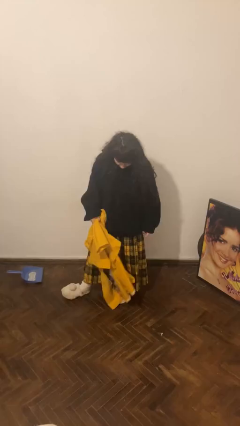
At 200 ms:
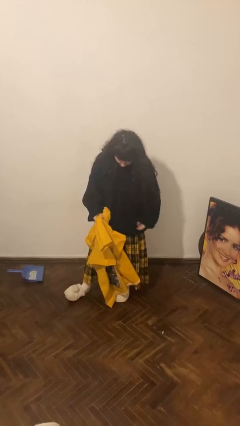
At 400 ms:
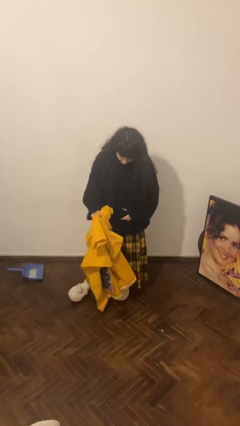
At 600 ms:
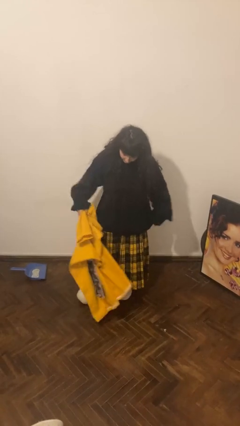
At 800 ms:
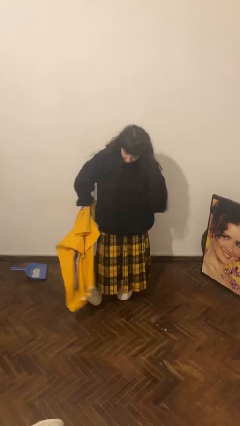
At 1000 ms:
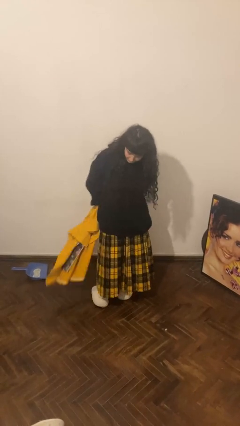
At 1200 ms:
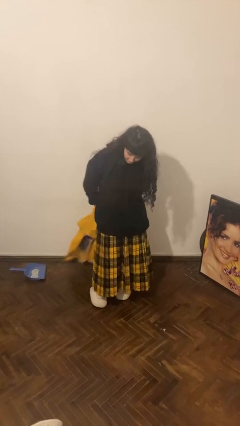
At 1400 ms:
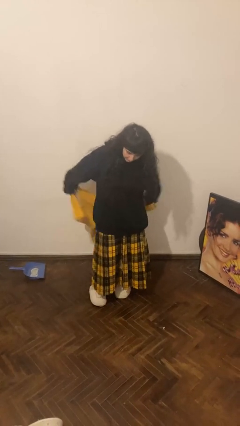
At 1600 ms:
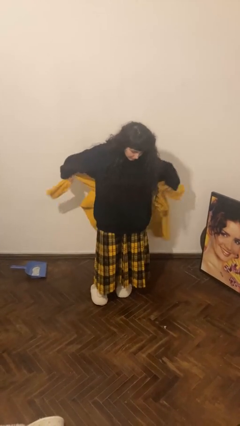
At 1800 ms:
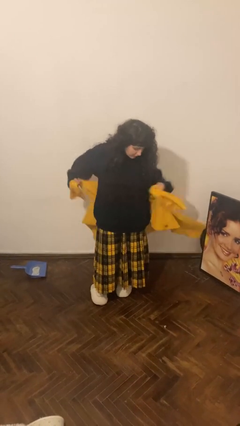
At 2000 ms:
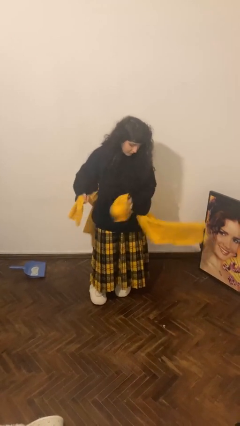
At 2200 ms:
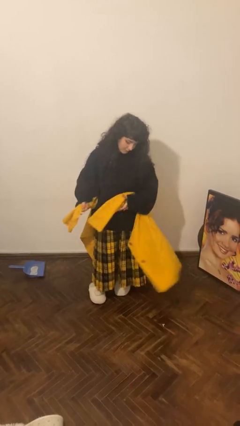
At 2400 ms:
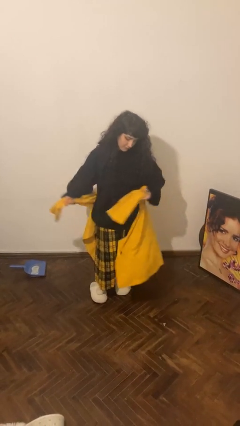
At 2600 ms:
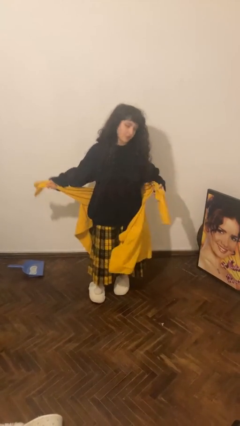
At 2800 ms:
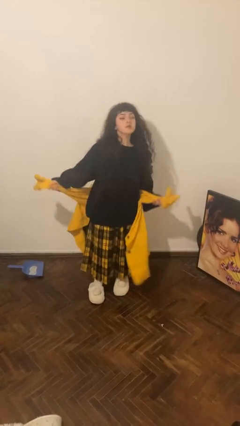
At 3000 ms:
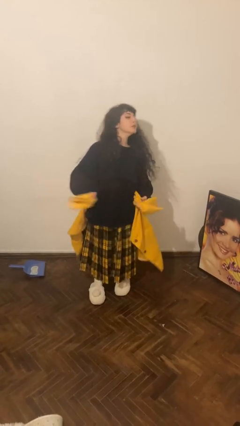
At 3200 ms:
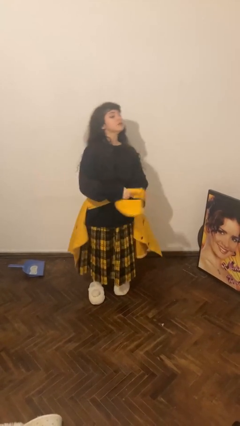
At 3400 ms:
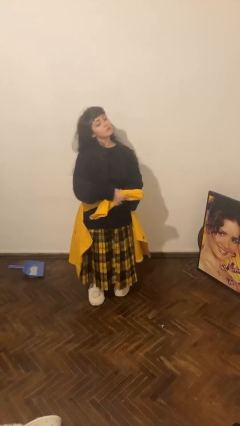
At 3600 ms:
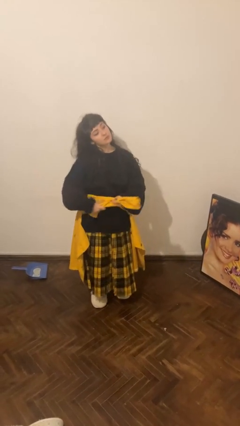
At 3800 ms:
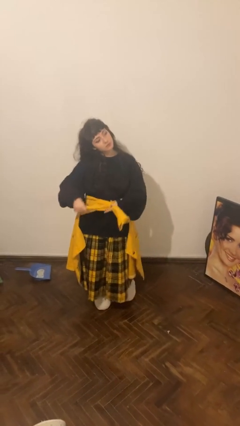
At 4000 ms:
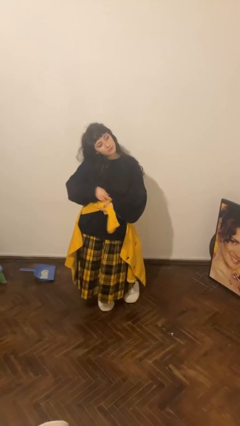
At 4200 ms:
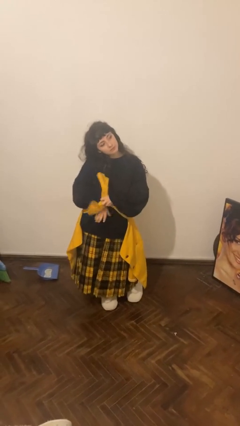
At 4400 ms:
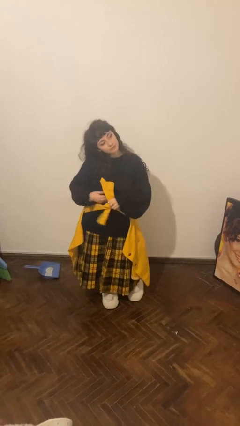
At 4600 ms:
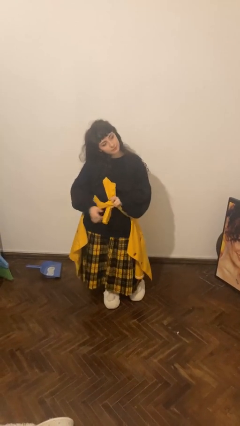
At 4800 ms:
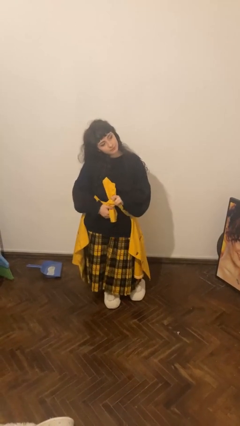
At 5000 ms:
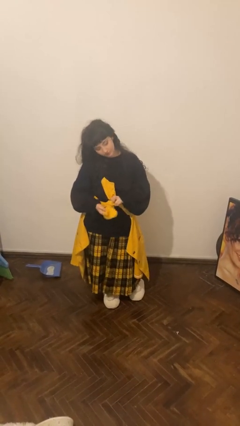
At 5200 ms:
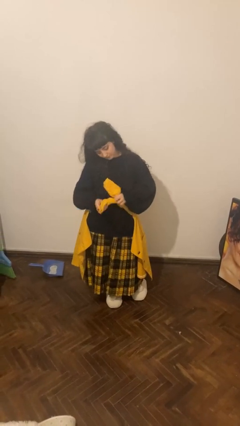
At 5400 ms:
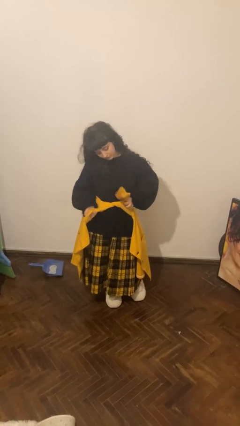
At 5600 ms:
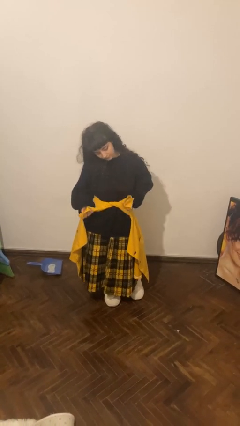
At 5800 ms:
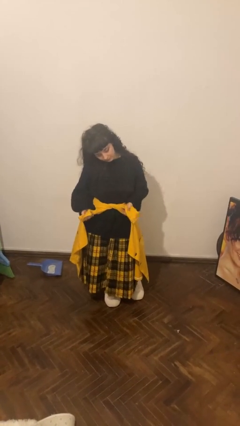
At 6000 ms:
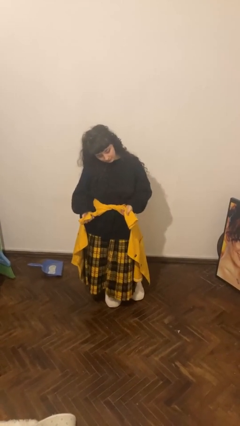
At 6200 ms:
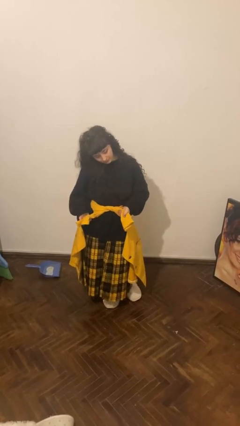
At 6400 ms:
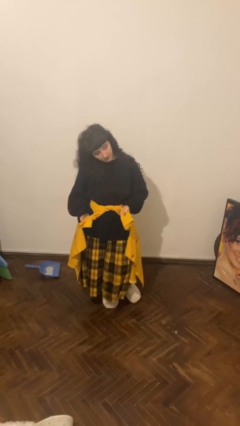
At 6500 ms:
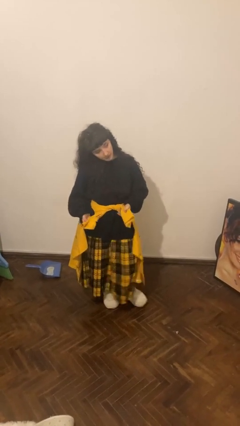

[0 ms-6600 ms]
person ties jacket around waist

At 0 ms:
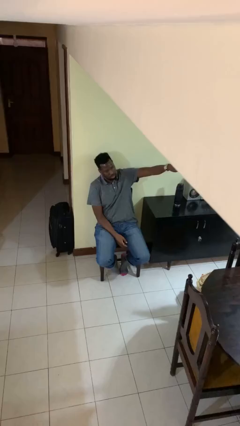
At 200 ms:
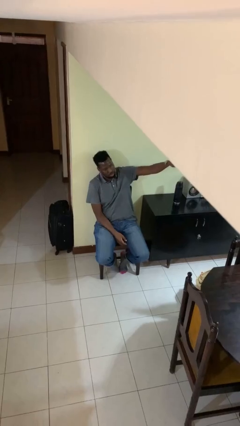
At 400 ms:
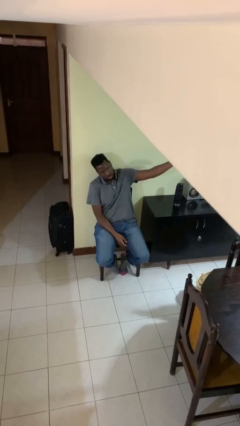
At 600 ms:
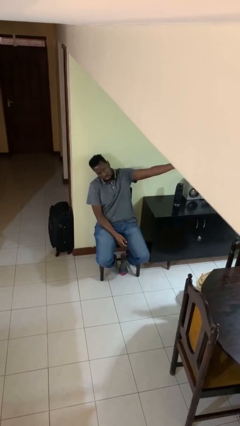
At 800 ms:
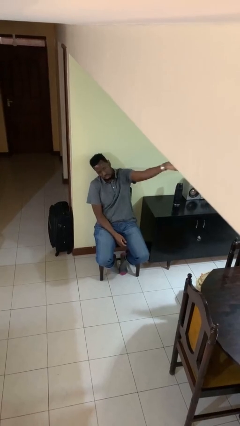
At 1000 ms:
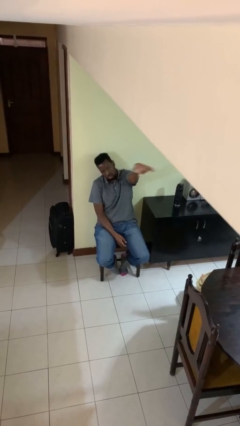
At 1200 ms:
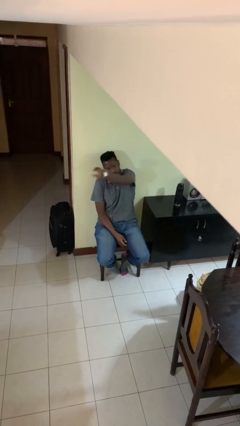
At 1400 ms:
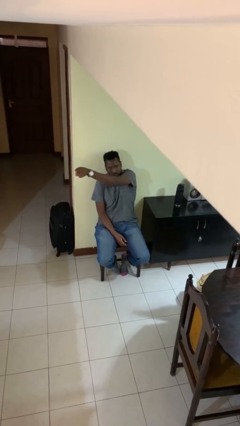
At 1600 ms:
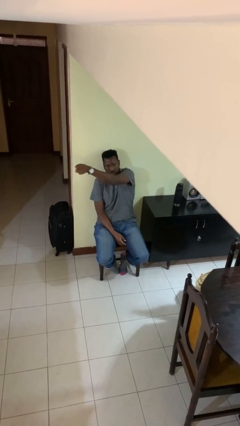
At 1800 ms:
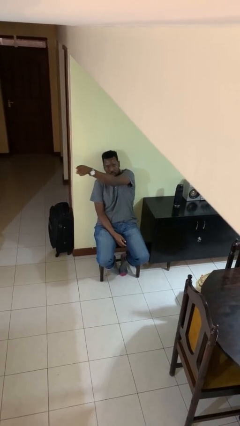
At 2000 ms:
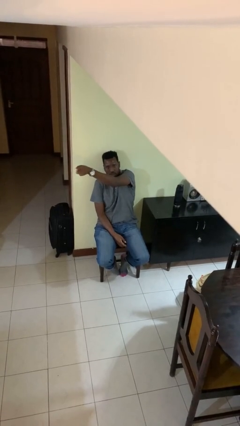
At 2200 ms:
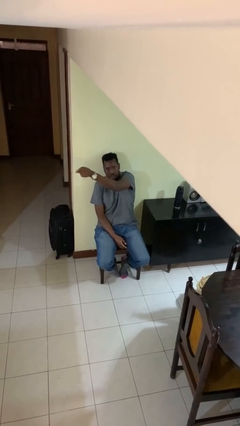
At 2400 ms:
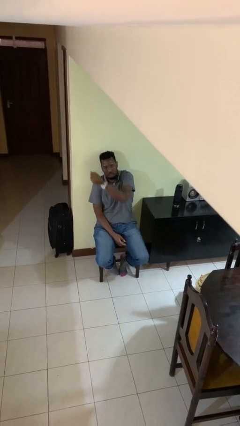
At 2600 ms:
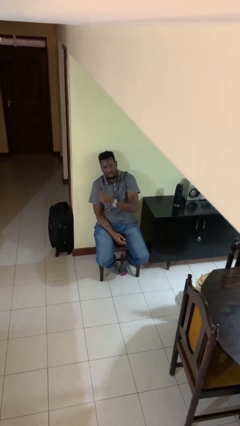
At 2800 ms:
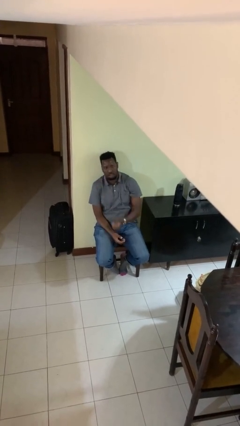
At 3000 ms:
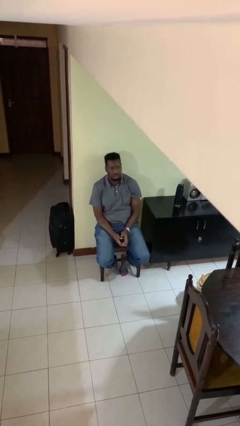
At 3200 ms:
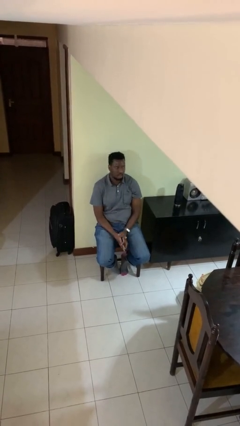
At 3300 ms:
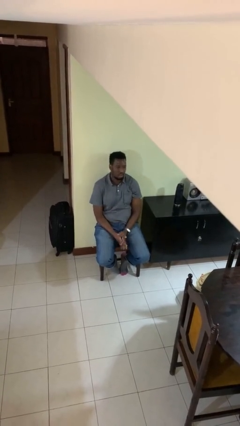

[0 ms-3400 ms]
person gestures swipe right

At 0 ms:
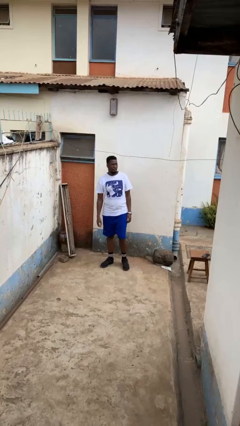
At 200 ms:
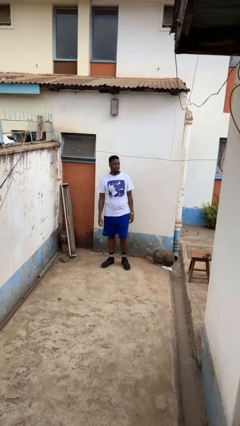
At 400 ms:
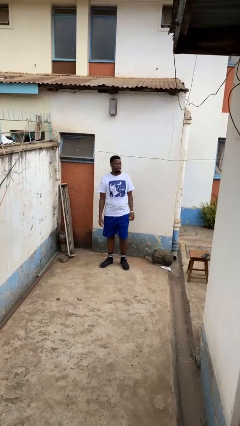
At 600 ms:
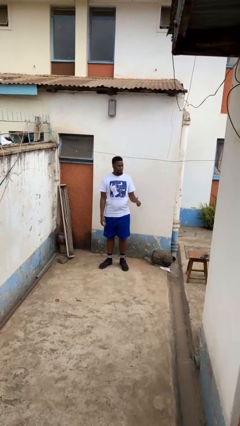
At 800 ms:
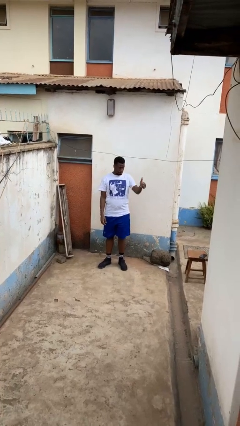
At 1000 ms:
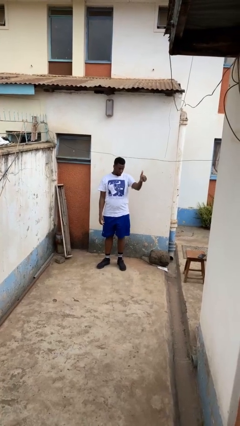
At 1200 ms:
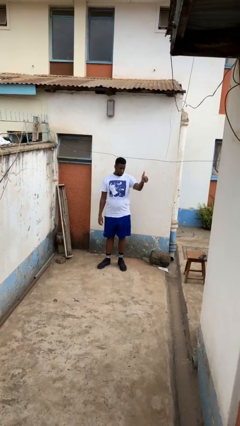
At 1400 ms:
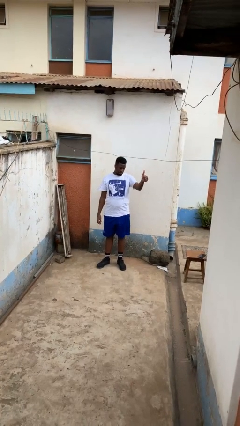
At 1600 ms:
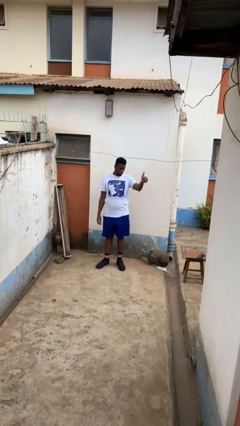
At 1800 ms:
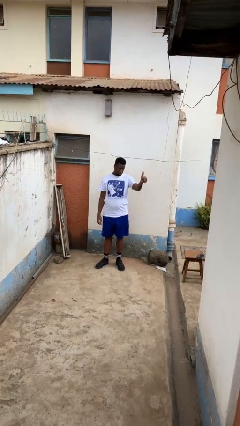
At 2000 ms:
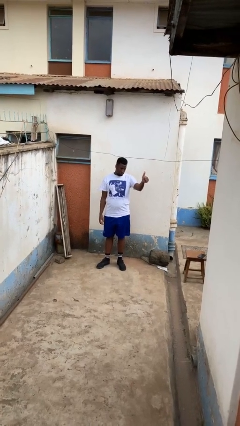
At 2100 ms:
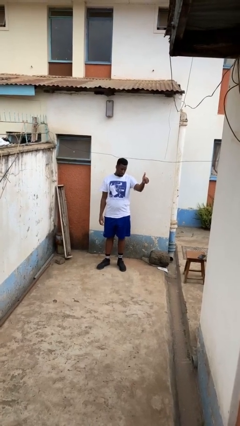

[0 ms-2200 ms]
person gestures thumbs up

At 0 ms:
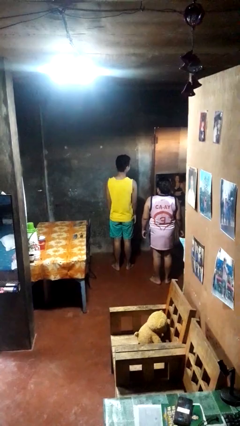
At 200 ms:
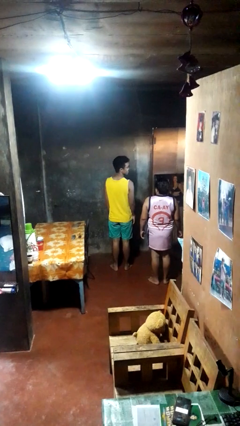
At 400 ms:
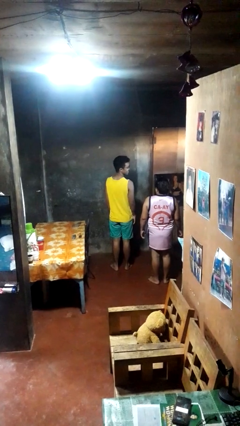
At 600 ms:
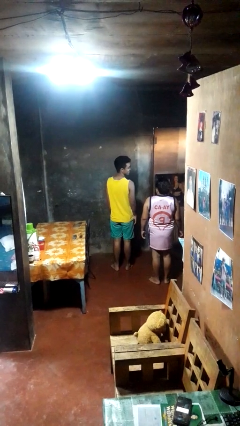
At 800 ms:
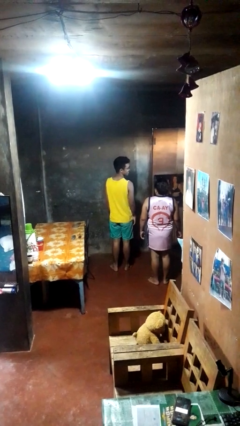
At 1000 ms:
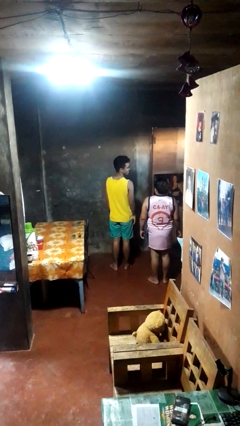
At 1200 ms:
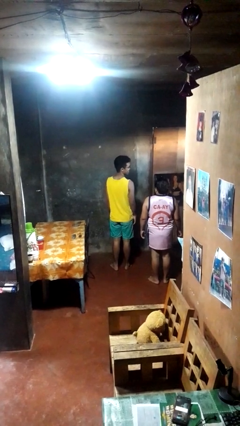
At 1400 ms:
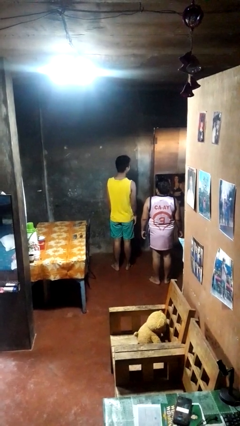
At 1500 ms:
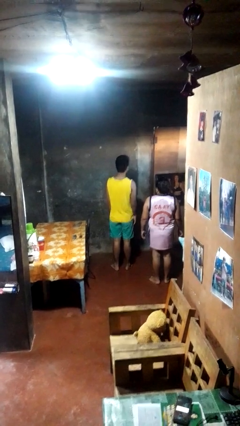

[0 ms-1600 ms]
person looks over shoulder

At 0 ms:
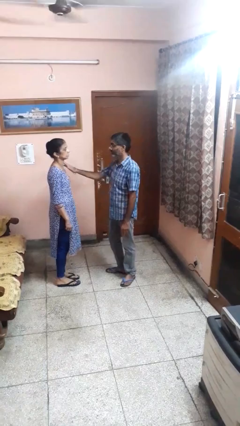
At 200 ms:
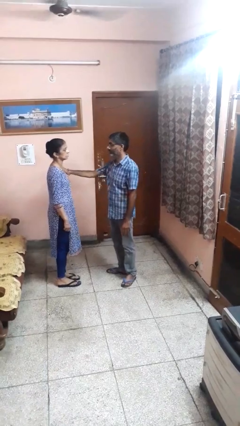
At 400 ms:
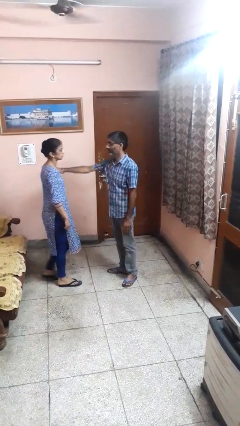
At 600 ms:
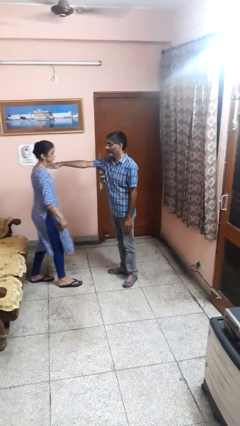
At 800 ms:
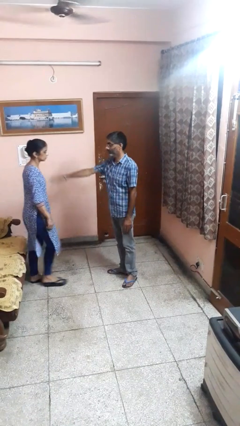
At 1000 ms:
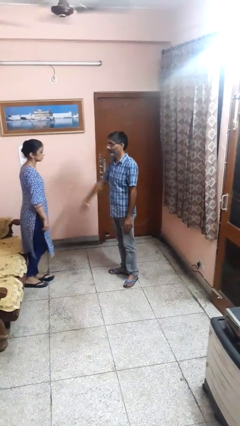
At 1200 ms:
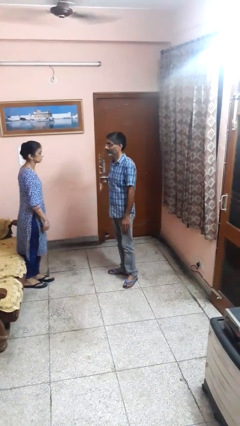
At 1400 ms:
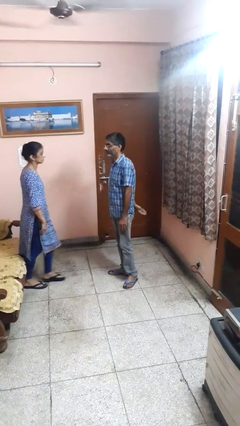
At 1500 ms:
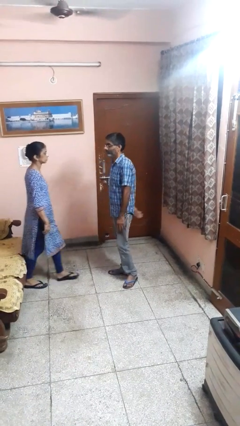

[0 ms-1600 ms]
person shoves person

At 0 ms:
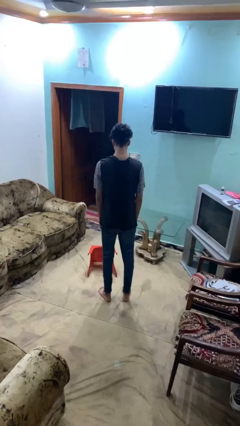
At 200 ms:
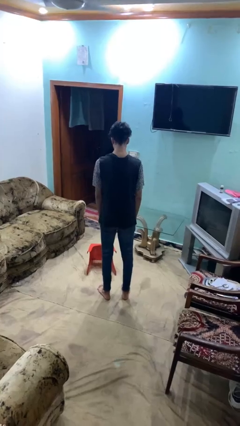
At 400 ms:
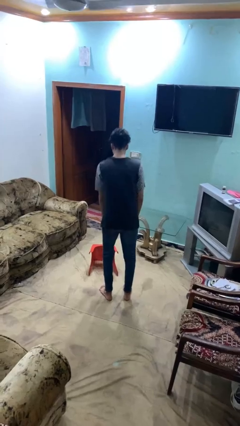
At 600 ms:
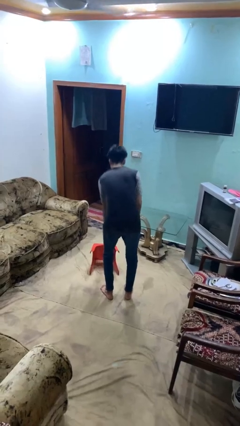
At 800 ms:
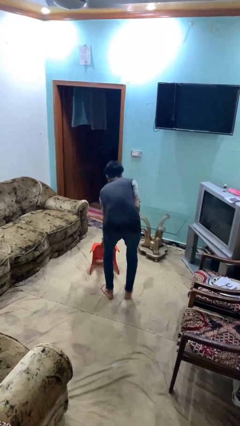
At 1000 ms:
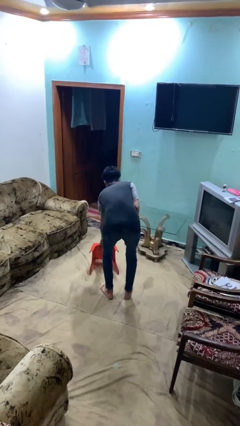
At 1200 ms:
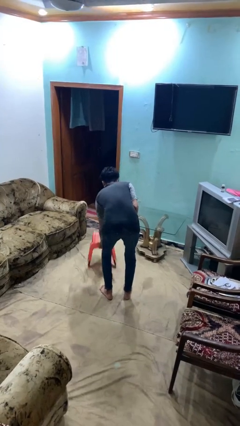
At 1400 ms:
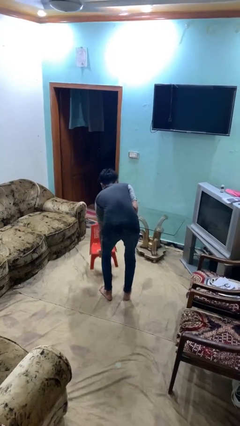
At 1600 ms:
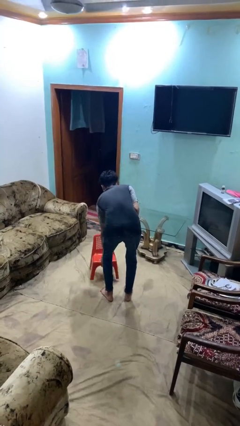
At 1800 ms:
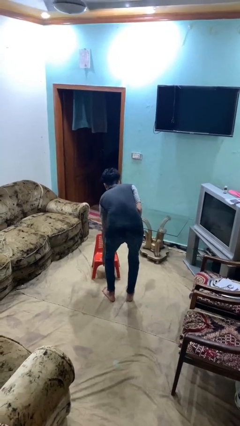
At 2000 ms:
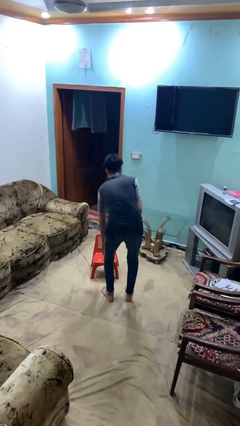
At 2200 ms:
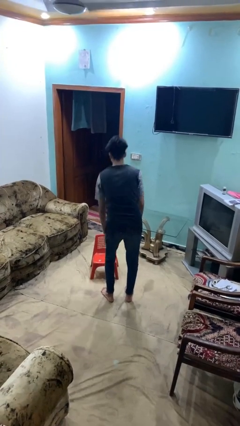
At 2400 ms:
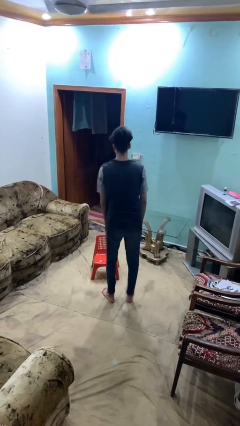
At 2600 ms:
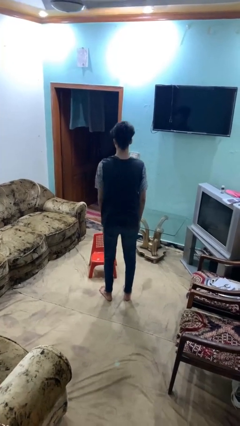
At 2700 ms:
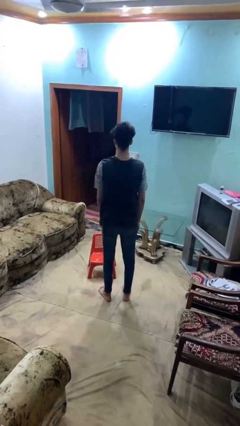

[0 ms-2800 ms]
person sets upright furniture
